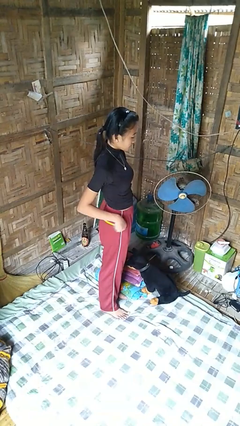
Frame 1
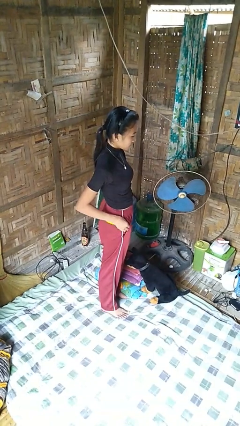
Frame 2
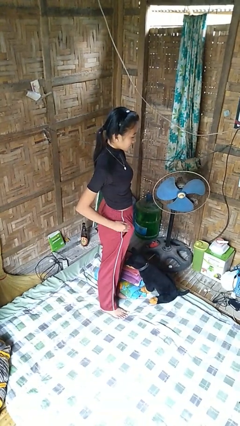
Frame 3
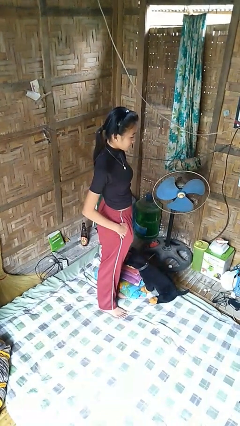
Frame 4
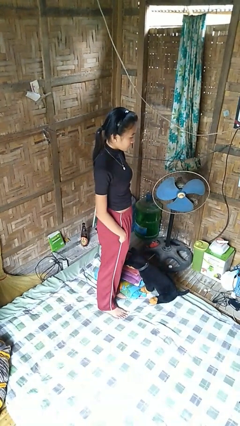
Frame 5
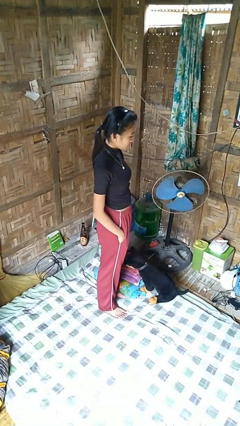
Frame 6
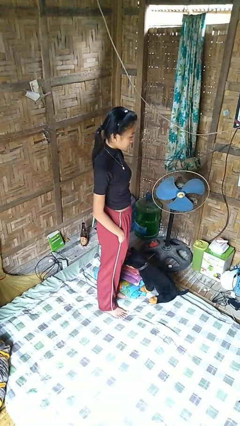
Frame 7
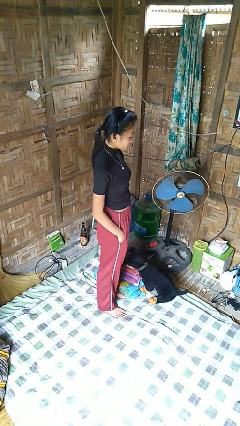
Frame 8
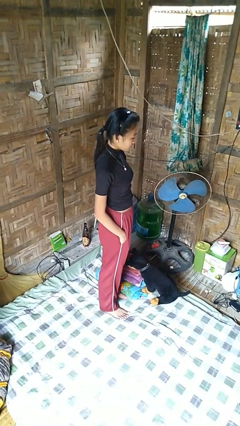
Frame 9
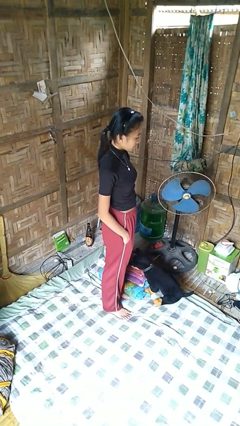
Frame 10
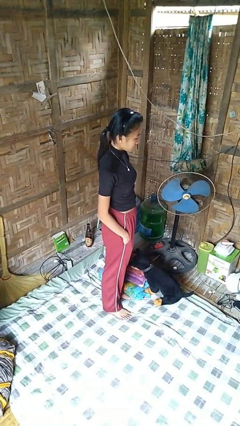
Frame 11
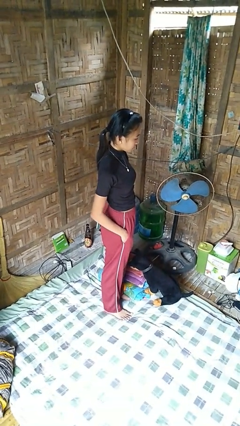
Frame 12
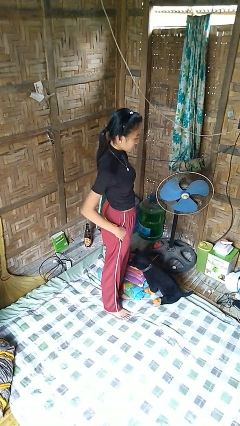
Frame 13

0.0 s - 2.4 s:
person puts hands in back pockets

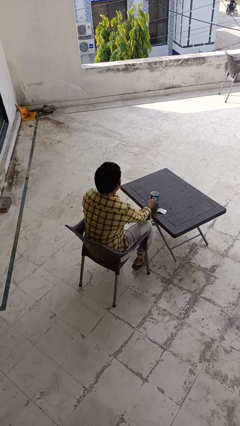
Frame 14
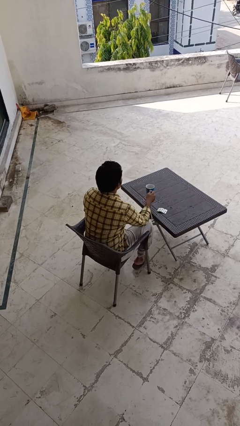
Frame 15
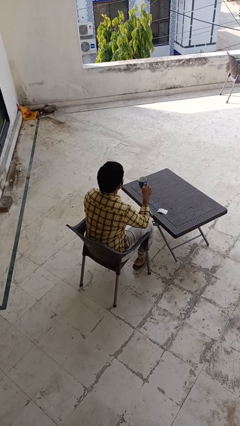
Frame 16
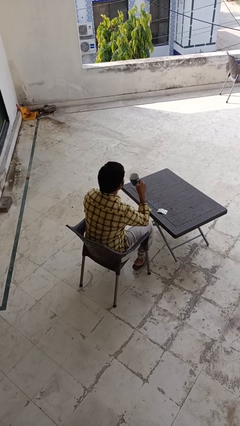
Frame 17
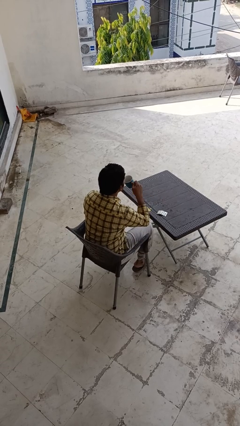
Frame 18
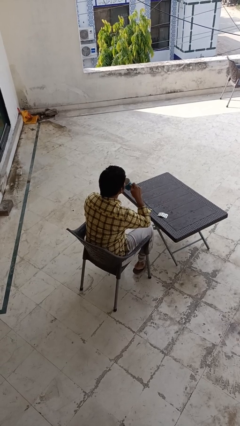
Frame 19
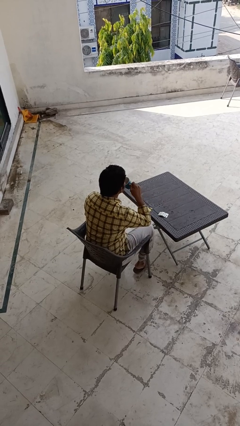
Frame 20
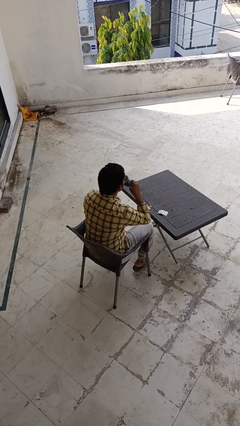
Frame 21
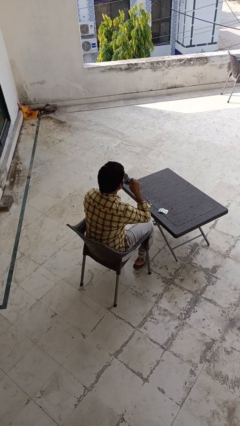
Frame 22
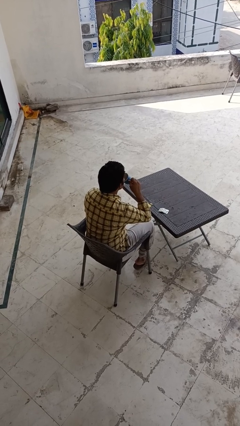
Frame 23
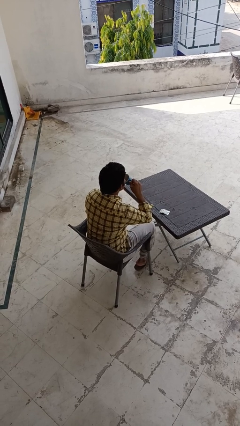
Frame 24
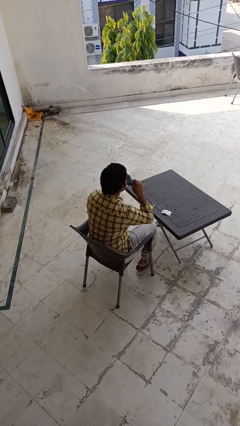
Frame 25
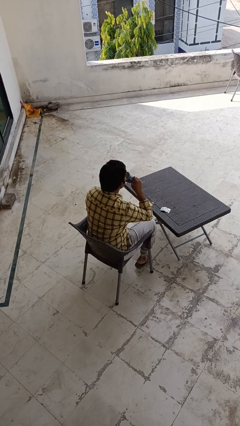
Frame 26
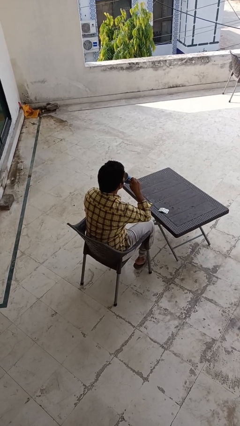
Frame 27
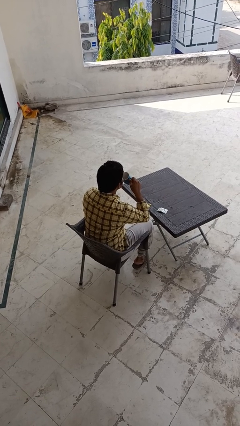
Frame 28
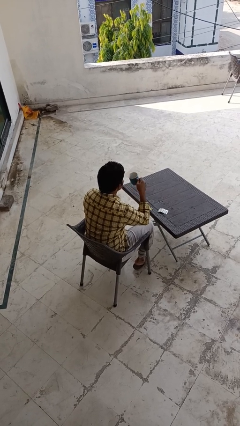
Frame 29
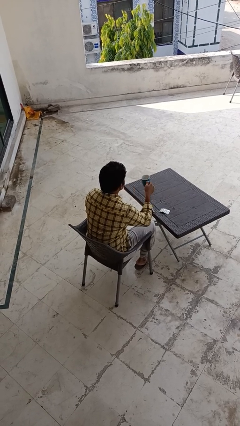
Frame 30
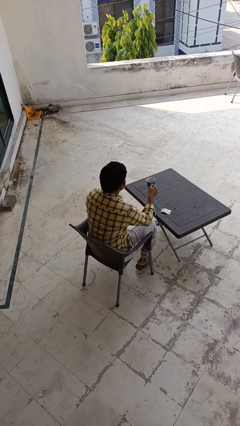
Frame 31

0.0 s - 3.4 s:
person drinks from cup

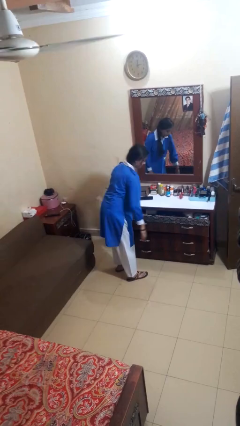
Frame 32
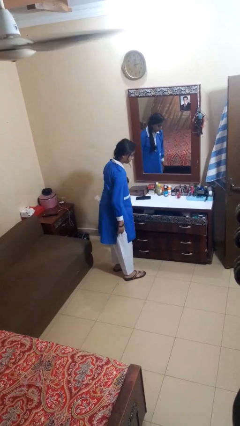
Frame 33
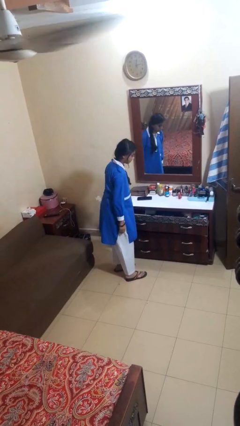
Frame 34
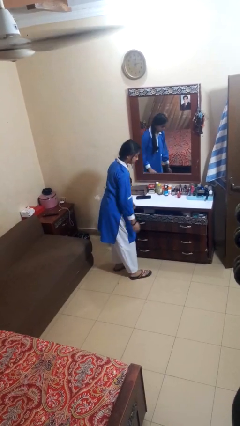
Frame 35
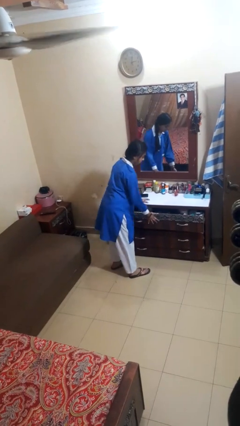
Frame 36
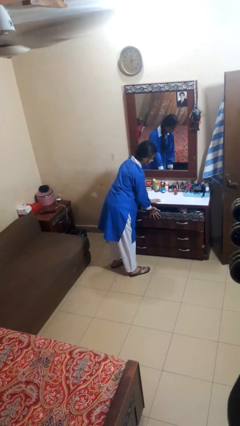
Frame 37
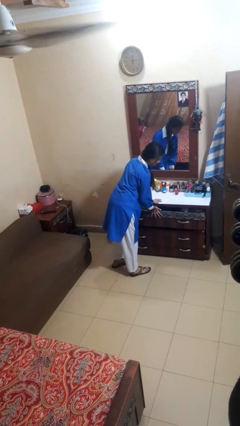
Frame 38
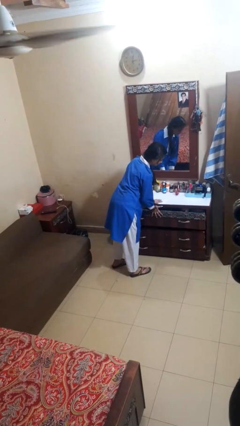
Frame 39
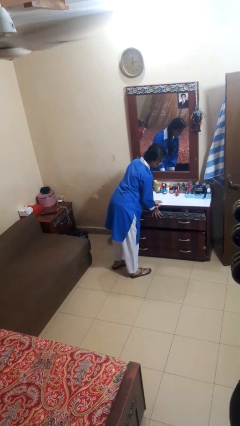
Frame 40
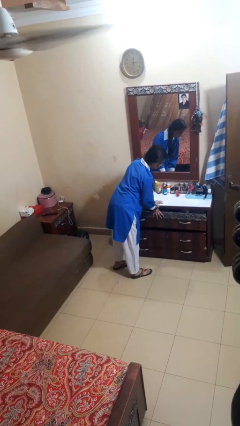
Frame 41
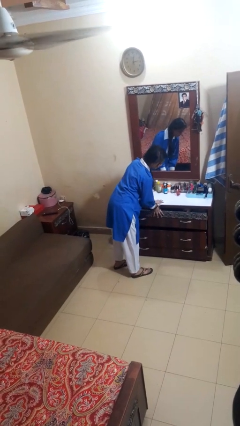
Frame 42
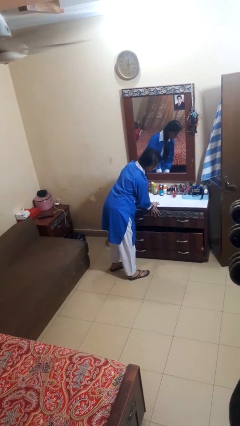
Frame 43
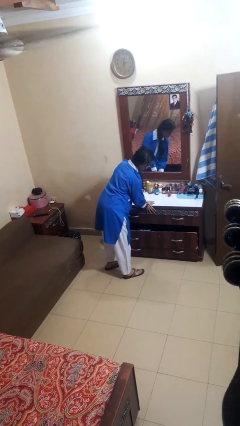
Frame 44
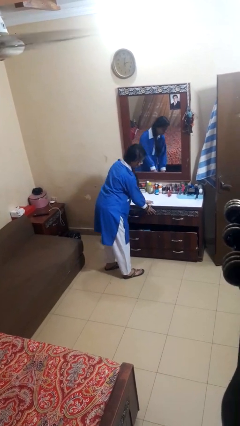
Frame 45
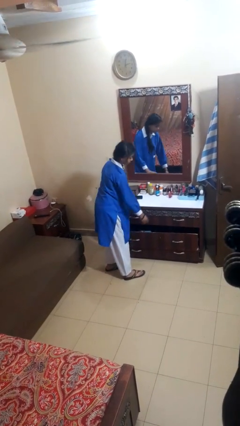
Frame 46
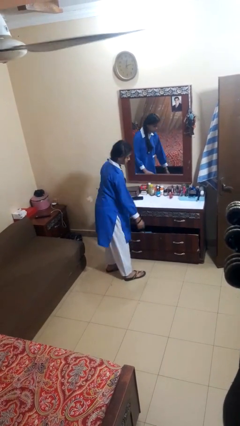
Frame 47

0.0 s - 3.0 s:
person closes dresser drawer

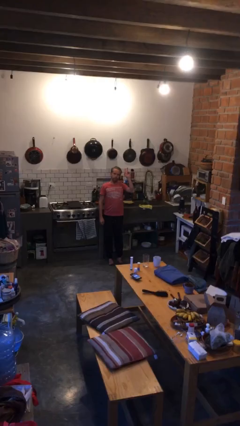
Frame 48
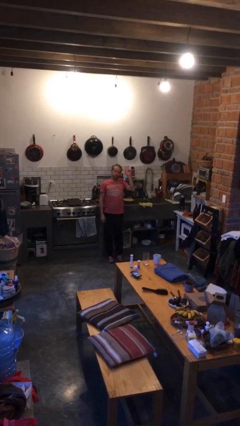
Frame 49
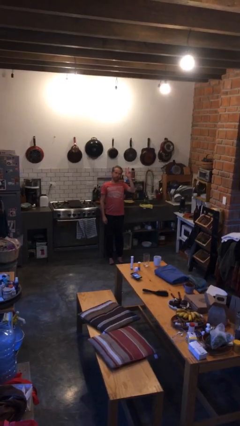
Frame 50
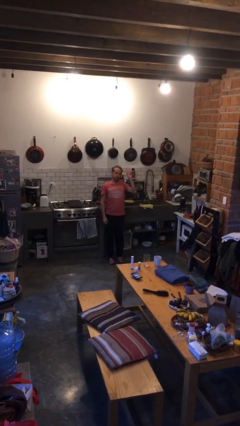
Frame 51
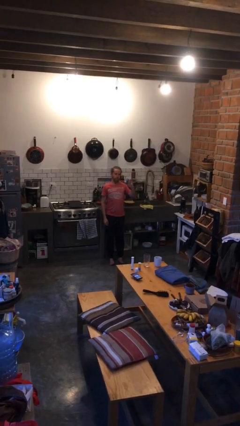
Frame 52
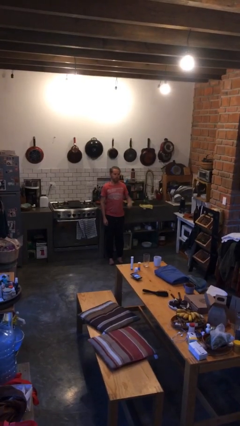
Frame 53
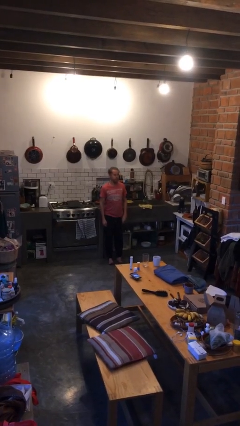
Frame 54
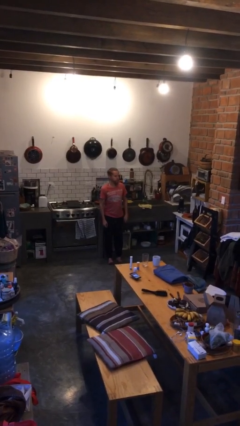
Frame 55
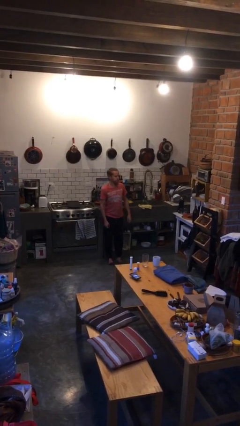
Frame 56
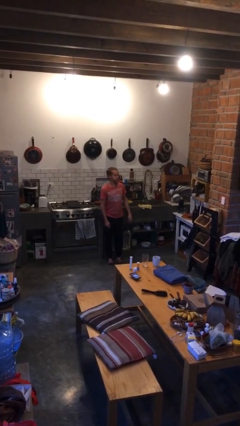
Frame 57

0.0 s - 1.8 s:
person gestures lower hand

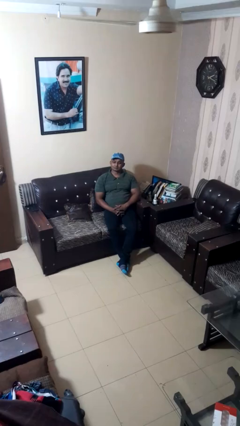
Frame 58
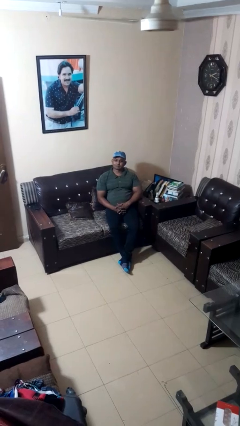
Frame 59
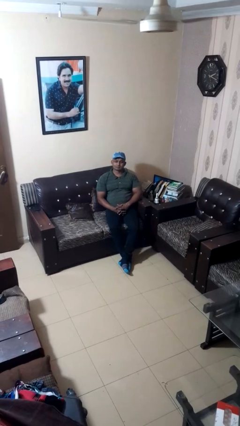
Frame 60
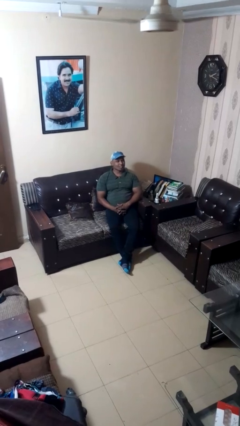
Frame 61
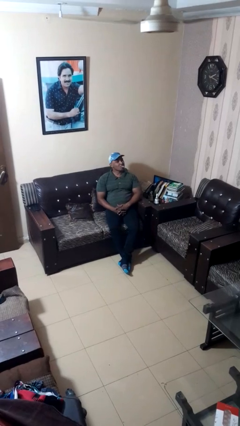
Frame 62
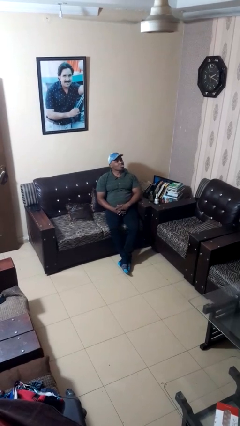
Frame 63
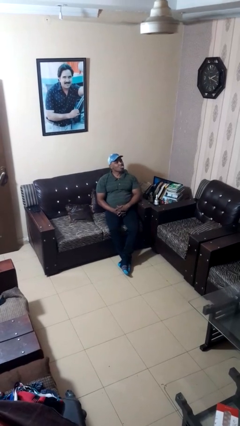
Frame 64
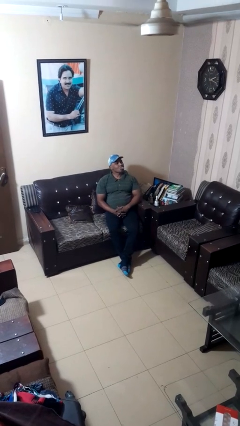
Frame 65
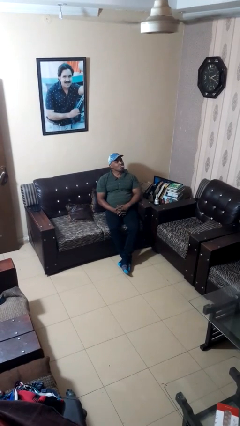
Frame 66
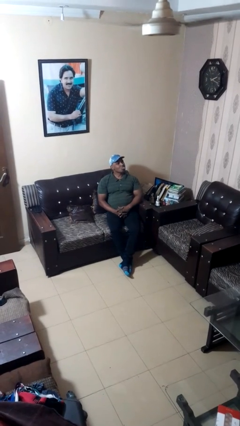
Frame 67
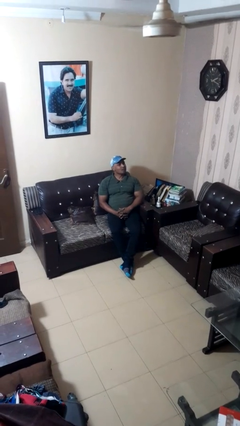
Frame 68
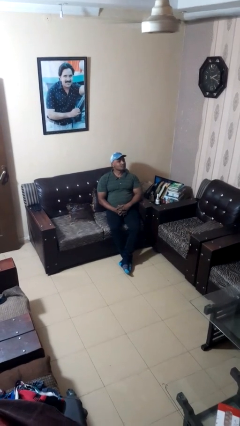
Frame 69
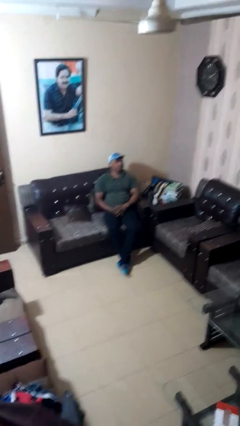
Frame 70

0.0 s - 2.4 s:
person sticks out tongue

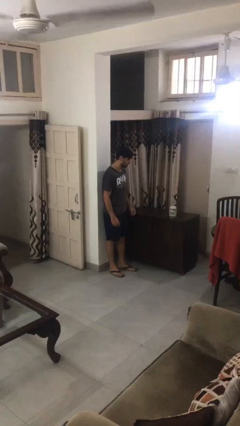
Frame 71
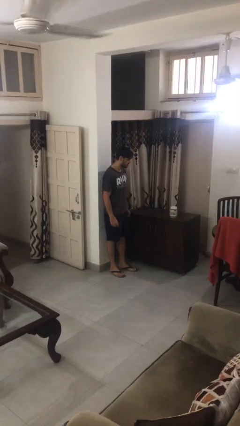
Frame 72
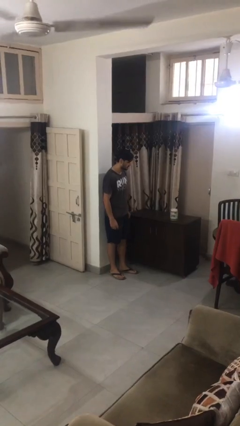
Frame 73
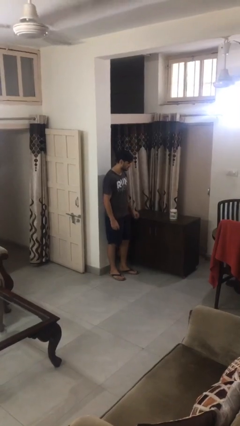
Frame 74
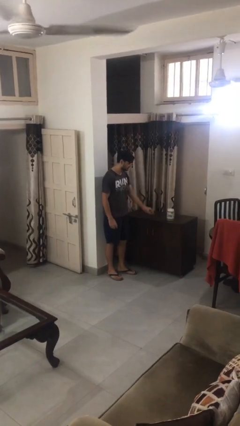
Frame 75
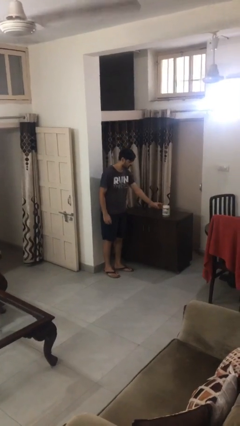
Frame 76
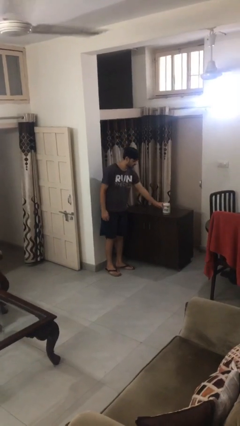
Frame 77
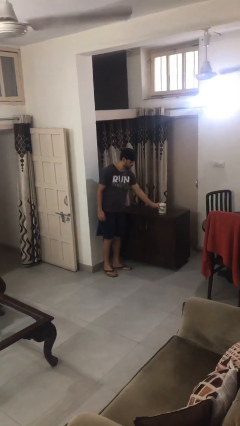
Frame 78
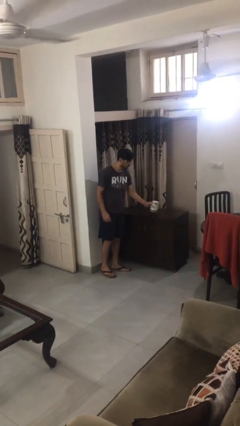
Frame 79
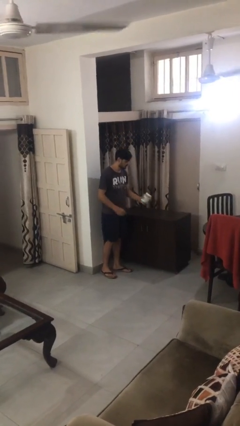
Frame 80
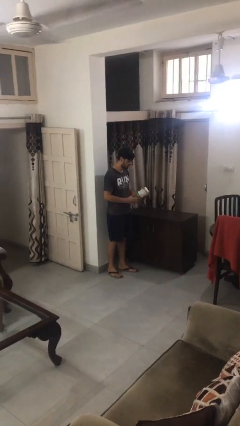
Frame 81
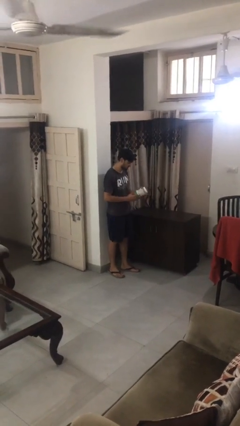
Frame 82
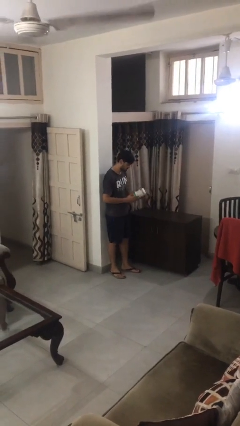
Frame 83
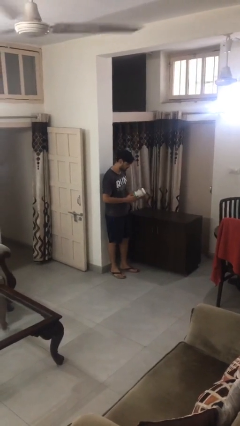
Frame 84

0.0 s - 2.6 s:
person picks up object from countertop

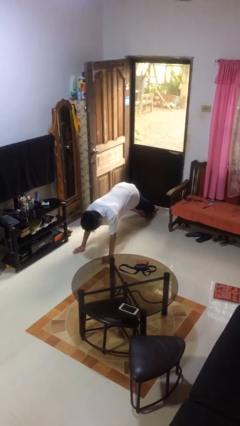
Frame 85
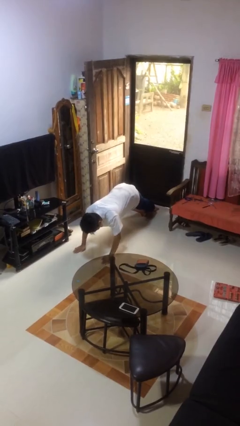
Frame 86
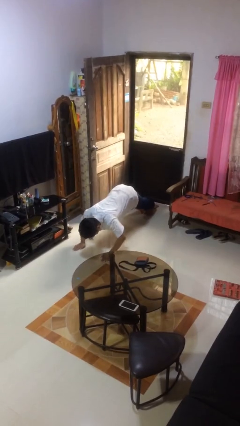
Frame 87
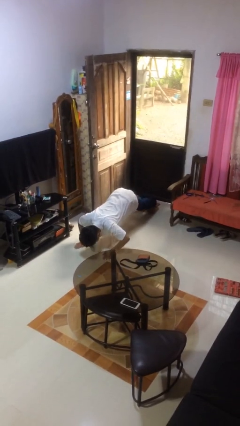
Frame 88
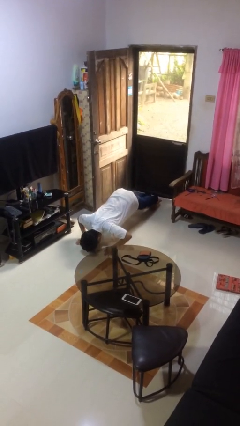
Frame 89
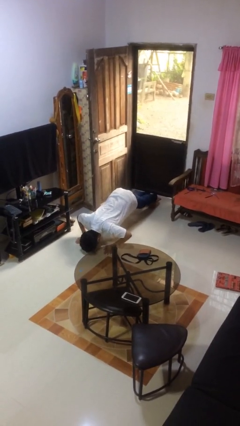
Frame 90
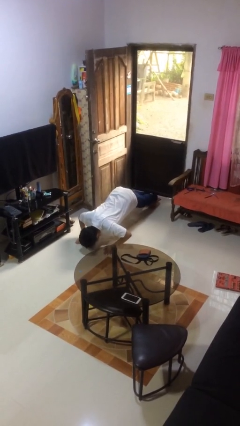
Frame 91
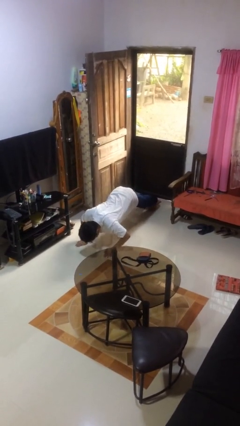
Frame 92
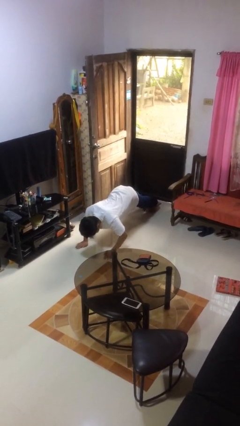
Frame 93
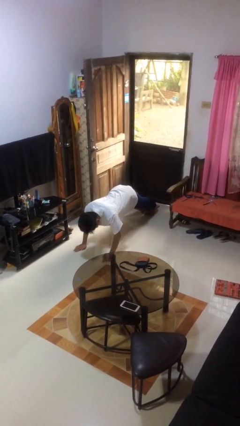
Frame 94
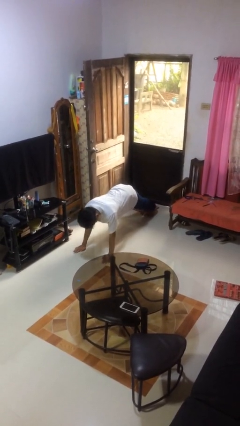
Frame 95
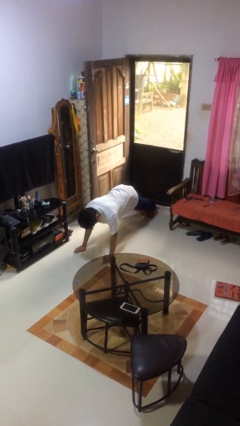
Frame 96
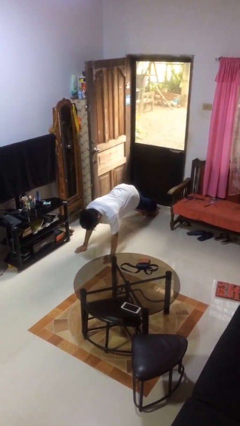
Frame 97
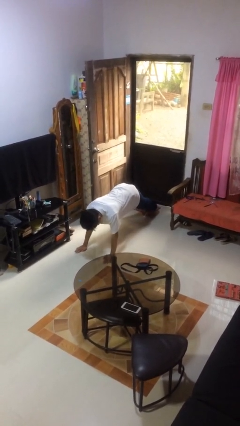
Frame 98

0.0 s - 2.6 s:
person exercises with pushup
